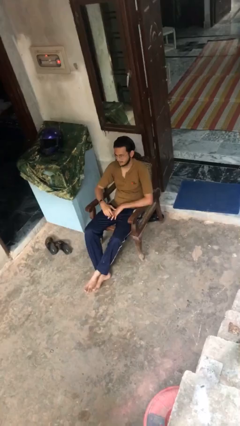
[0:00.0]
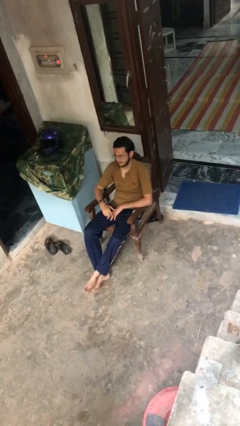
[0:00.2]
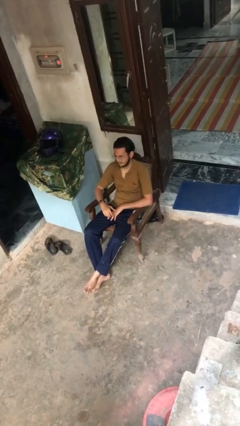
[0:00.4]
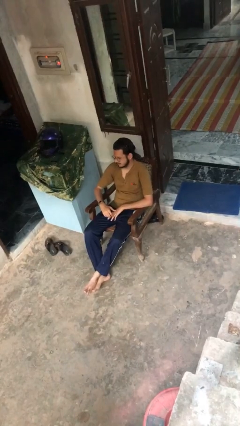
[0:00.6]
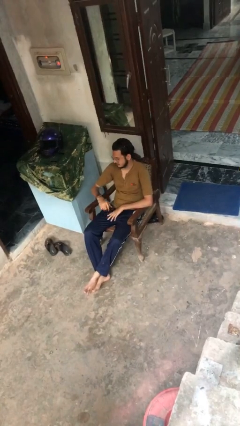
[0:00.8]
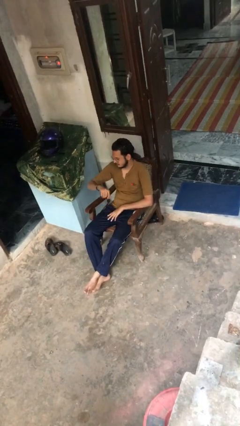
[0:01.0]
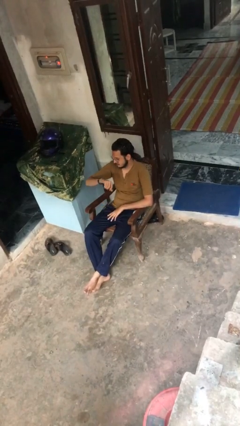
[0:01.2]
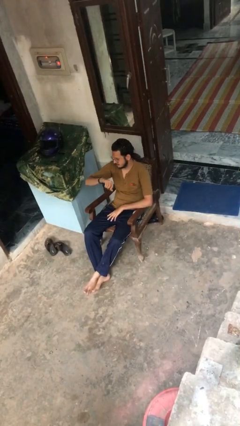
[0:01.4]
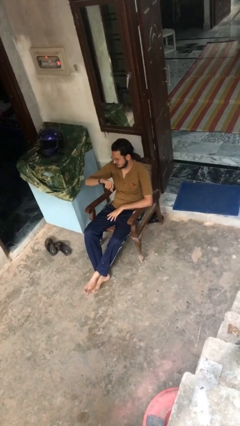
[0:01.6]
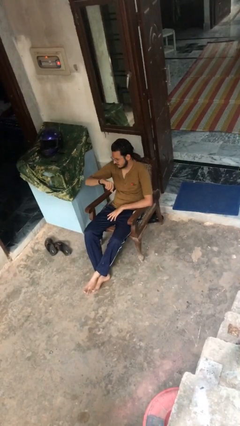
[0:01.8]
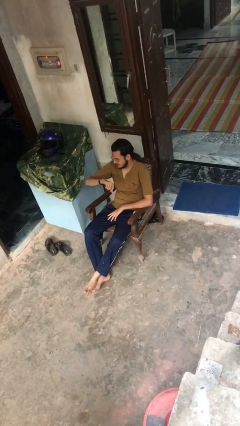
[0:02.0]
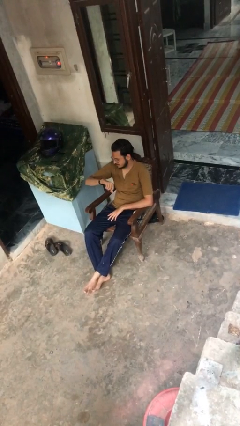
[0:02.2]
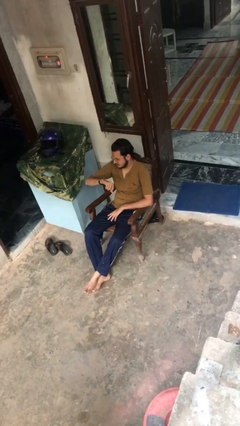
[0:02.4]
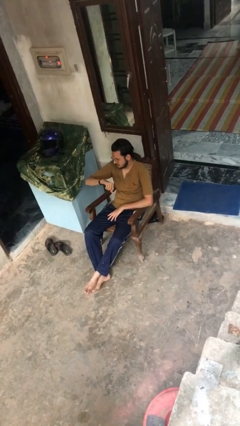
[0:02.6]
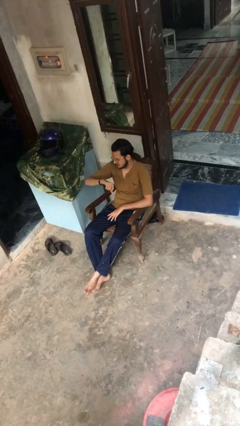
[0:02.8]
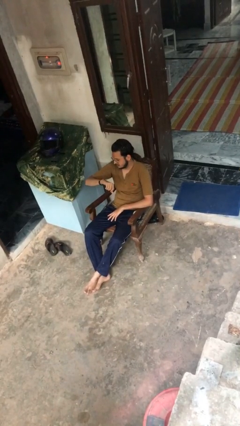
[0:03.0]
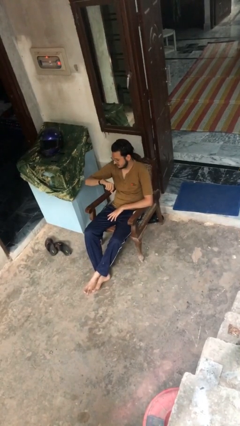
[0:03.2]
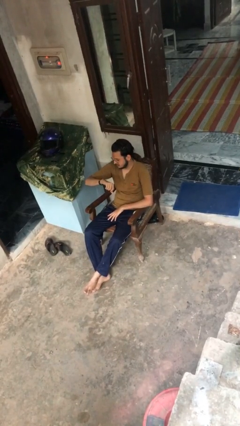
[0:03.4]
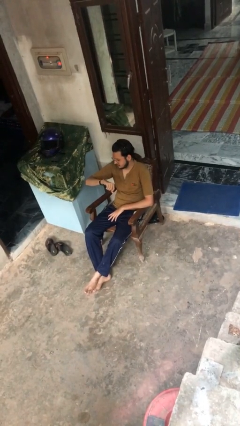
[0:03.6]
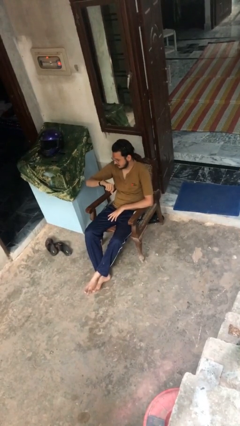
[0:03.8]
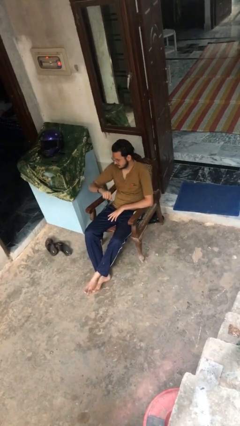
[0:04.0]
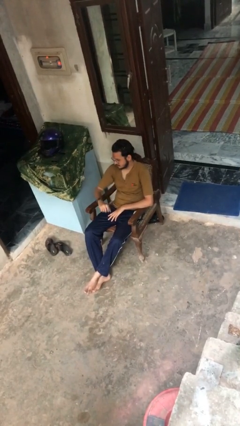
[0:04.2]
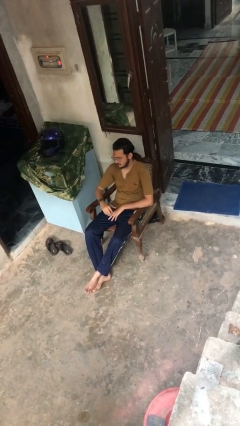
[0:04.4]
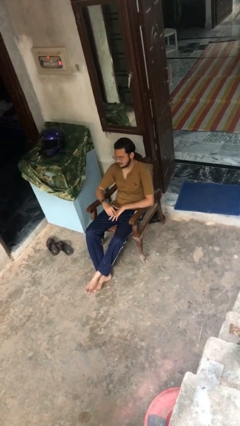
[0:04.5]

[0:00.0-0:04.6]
person looks at wristwatch

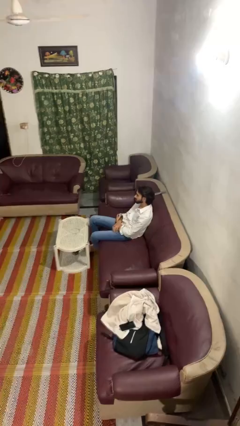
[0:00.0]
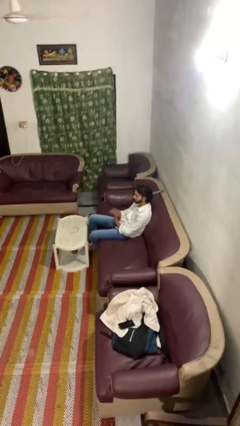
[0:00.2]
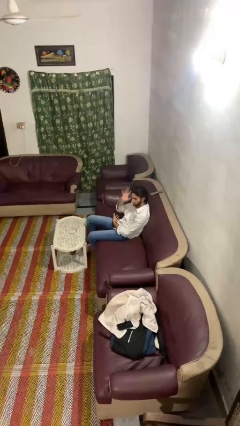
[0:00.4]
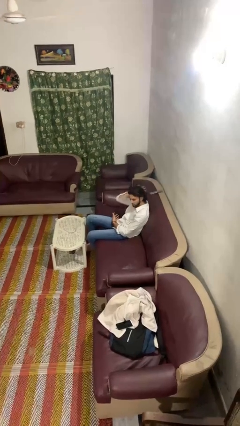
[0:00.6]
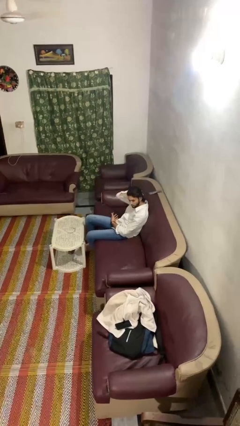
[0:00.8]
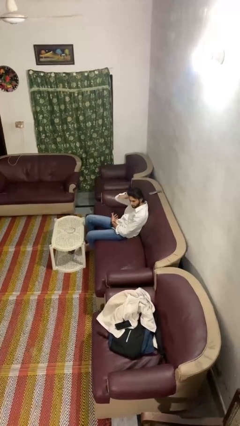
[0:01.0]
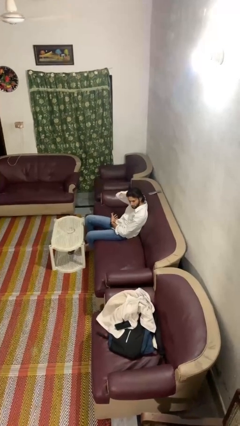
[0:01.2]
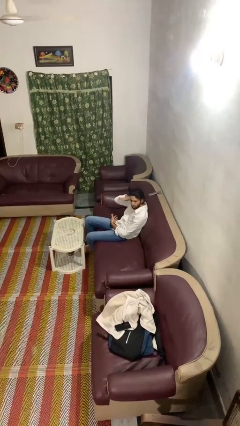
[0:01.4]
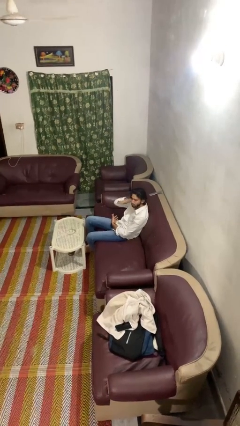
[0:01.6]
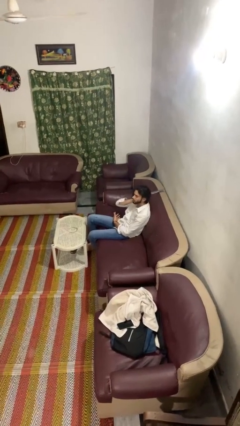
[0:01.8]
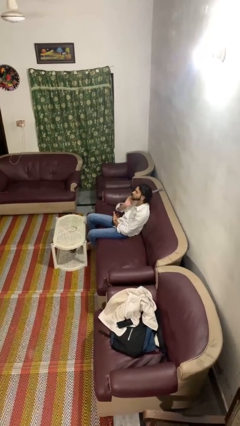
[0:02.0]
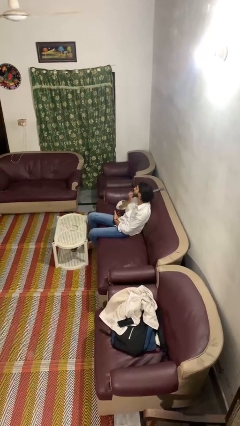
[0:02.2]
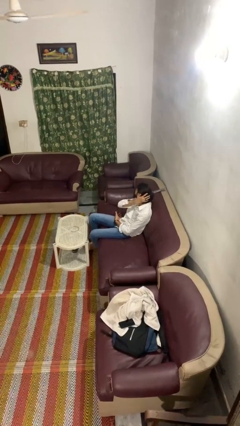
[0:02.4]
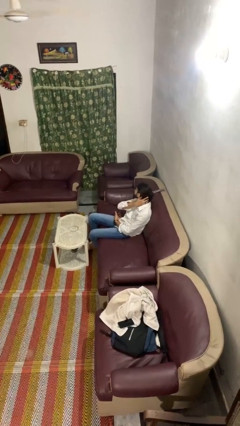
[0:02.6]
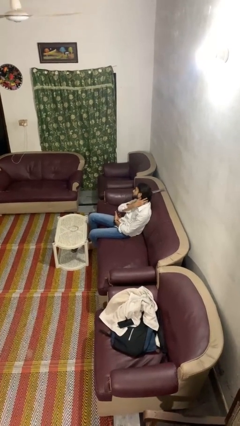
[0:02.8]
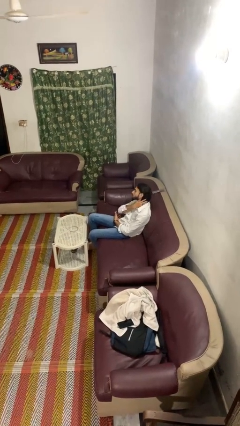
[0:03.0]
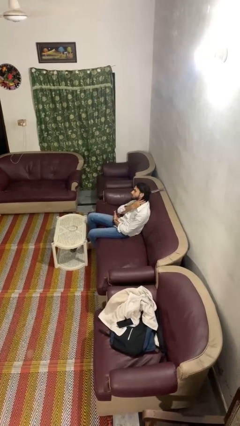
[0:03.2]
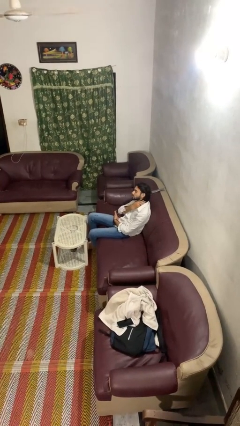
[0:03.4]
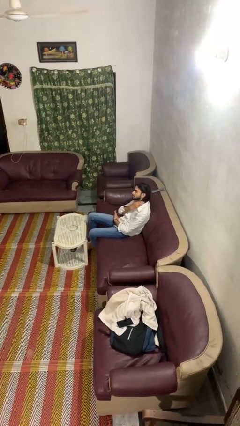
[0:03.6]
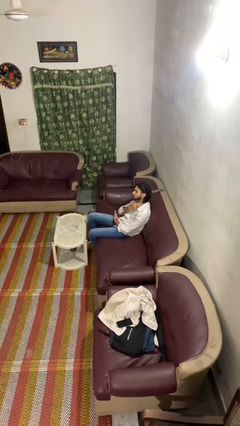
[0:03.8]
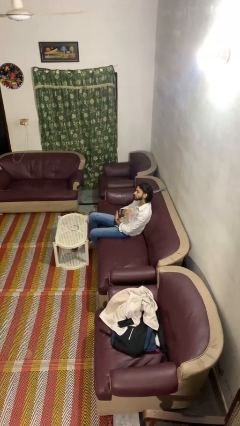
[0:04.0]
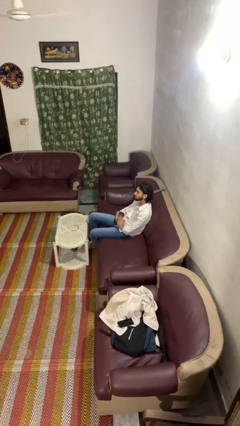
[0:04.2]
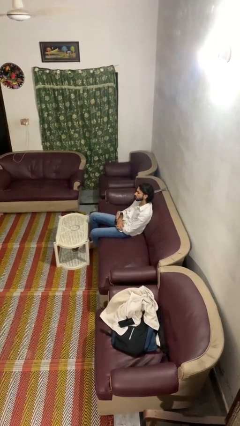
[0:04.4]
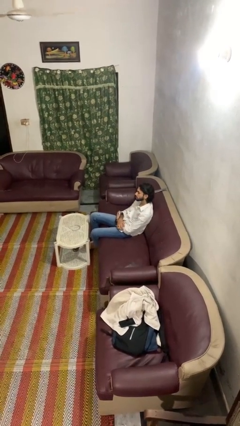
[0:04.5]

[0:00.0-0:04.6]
person strokes hair

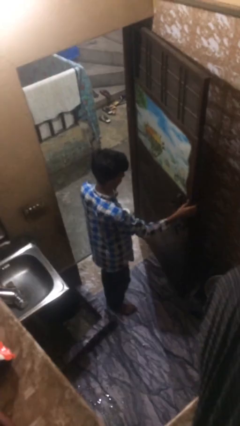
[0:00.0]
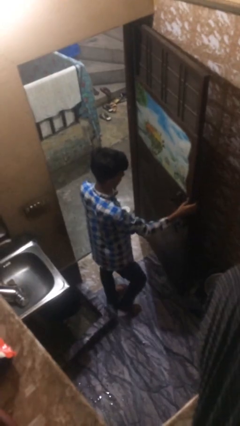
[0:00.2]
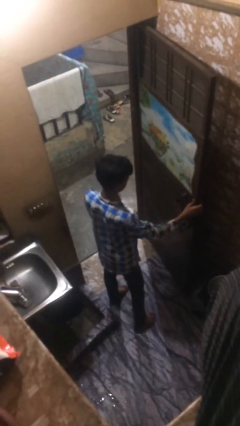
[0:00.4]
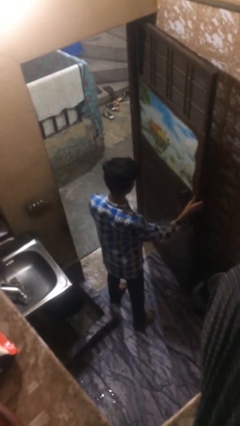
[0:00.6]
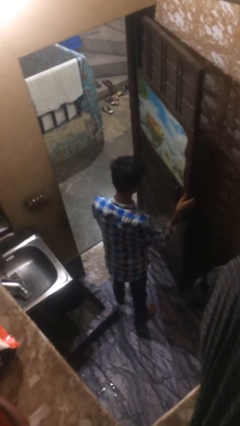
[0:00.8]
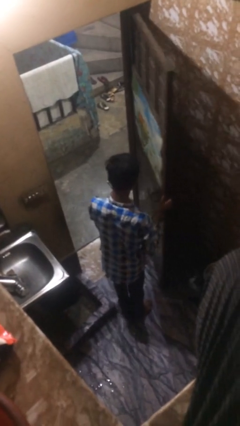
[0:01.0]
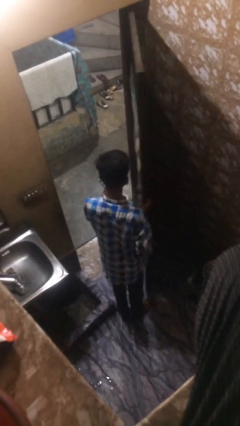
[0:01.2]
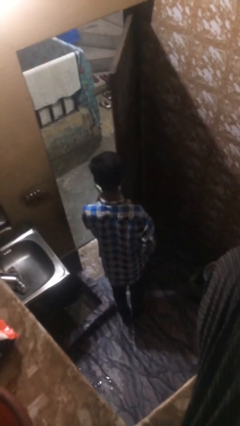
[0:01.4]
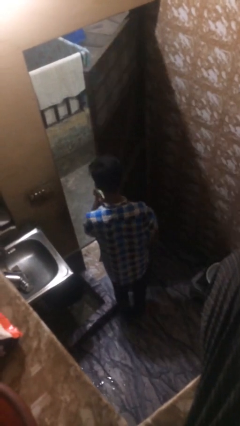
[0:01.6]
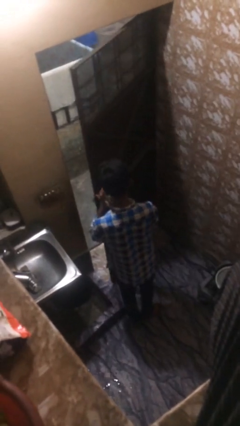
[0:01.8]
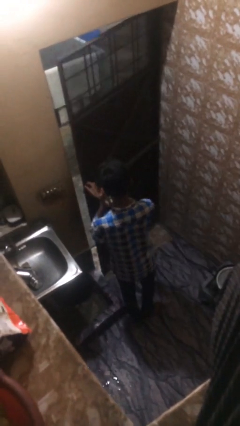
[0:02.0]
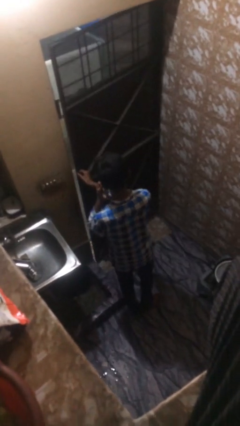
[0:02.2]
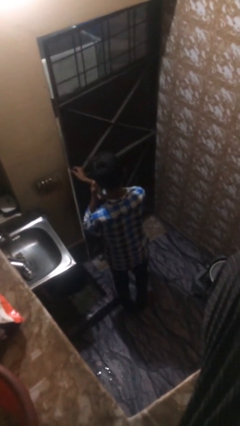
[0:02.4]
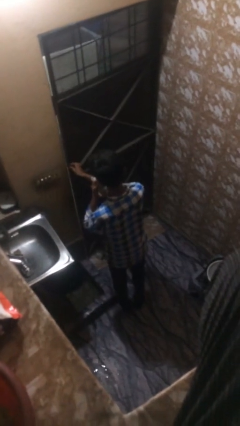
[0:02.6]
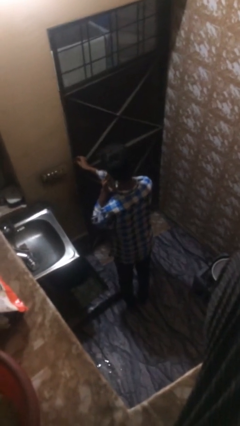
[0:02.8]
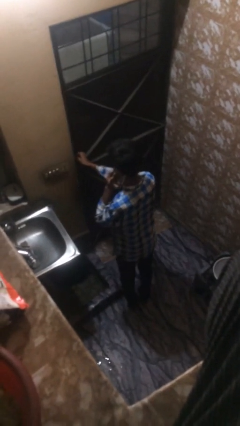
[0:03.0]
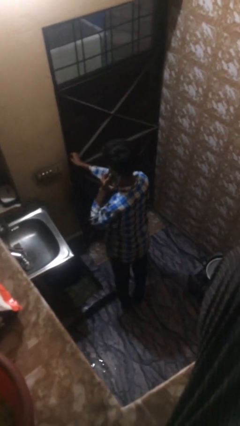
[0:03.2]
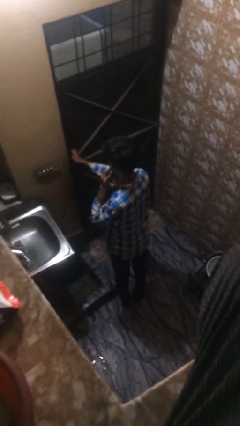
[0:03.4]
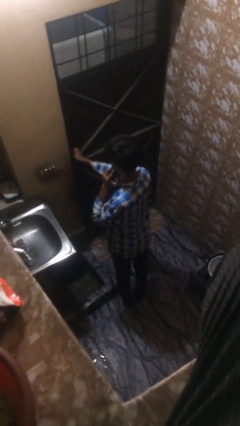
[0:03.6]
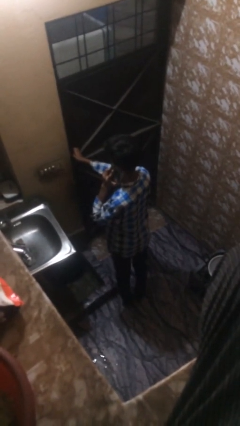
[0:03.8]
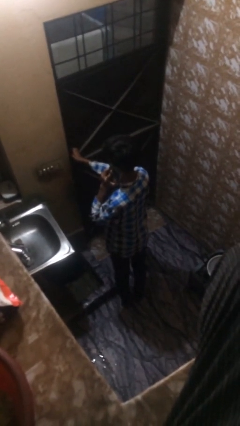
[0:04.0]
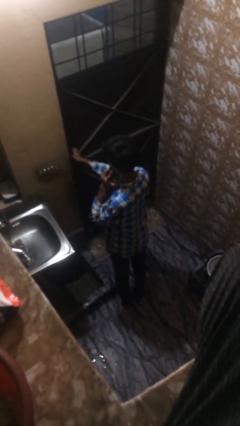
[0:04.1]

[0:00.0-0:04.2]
person closes facility door

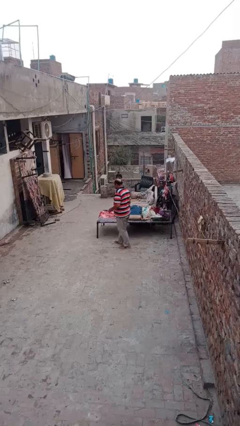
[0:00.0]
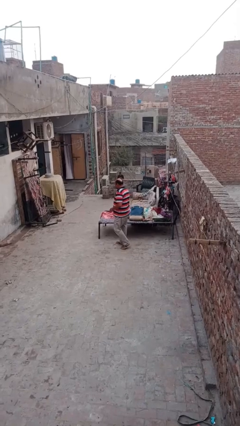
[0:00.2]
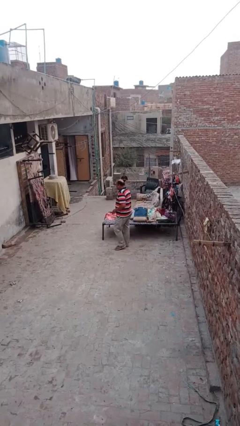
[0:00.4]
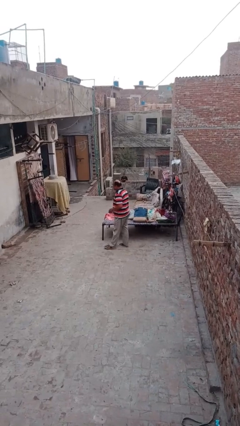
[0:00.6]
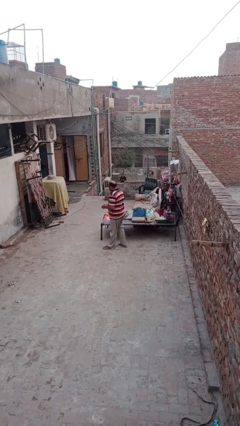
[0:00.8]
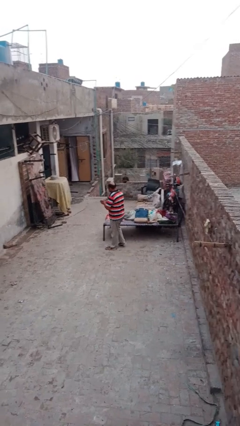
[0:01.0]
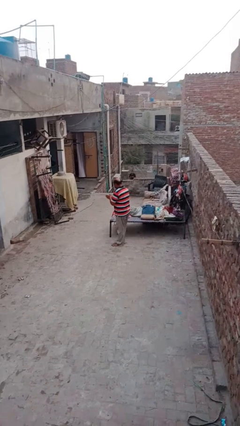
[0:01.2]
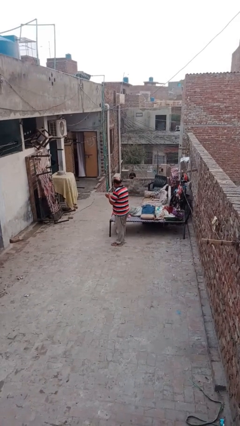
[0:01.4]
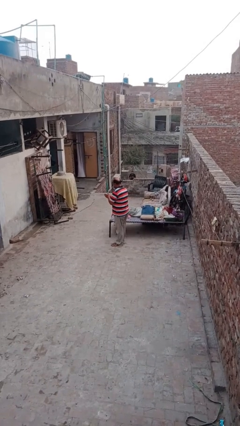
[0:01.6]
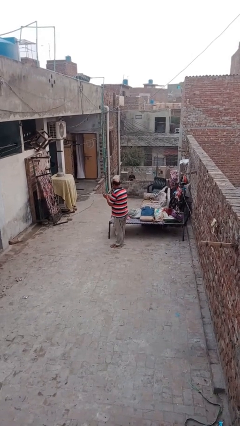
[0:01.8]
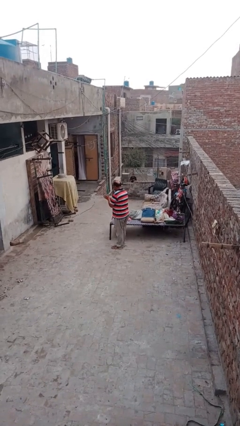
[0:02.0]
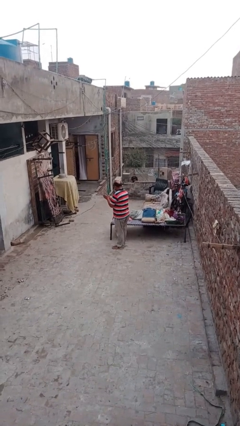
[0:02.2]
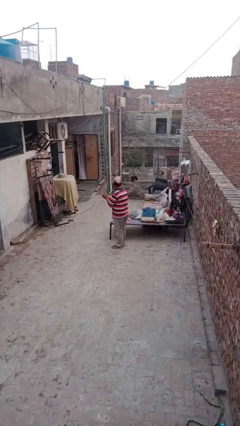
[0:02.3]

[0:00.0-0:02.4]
person blows into hands

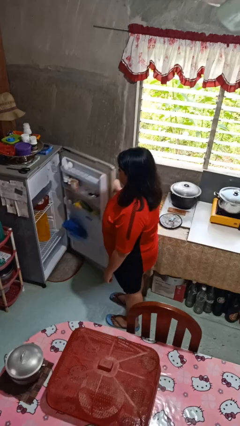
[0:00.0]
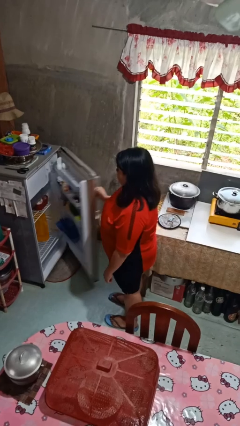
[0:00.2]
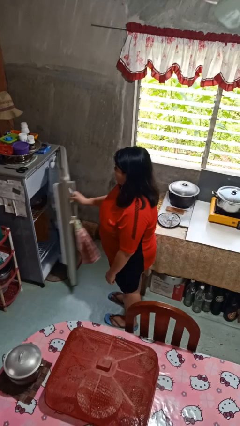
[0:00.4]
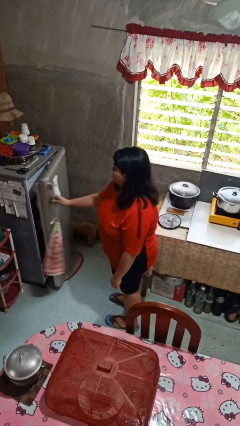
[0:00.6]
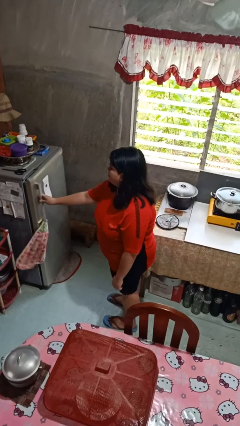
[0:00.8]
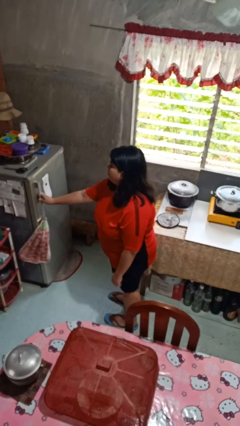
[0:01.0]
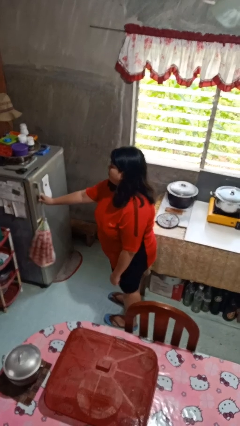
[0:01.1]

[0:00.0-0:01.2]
person closes refrigerator

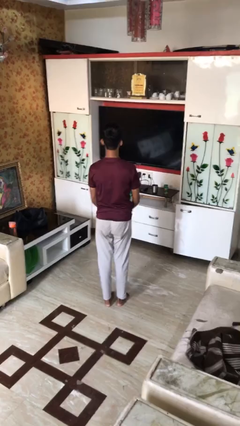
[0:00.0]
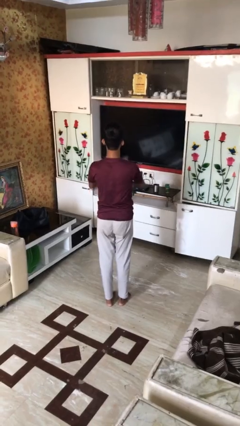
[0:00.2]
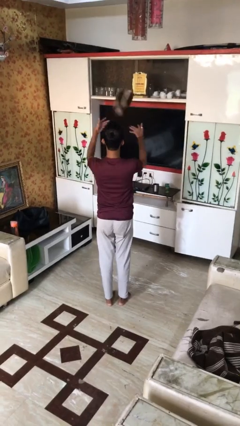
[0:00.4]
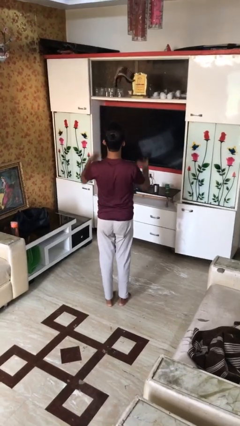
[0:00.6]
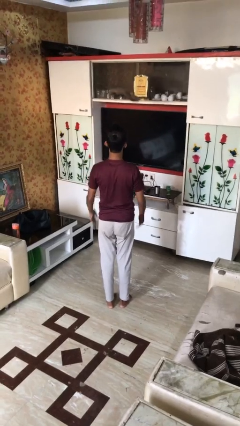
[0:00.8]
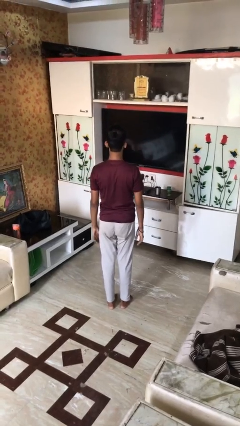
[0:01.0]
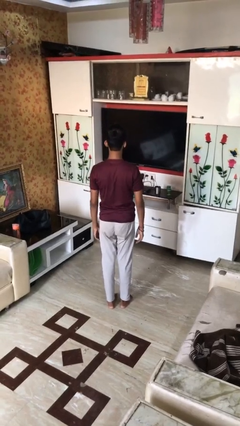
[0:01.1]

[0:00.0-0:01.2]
person throws object into air
